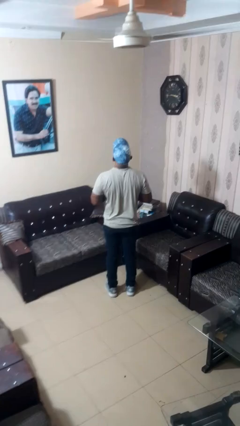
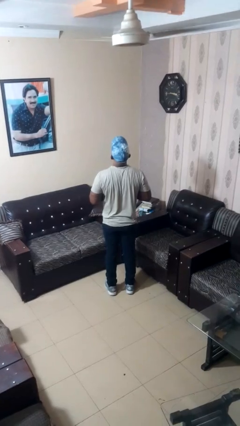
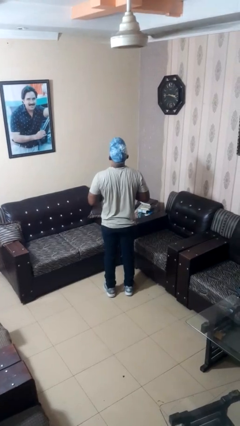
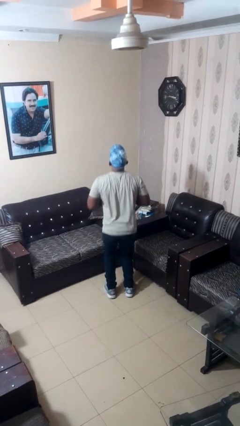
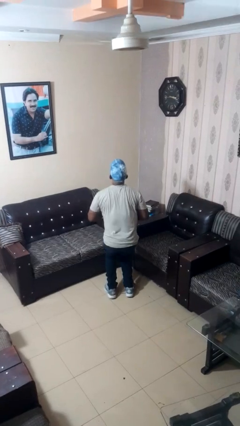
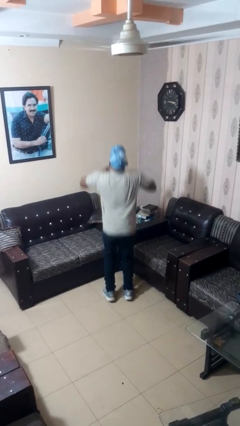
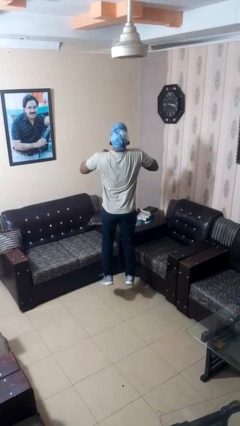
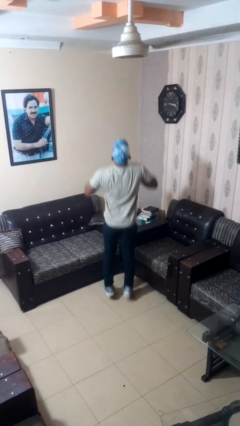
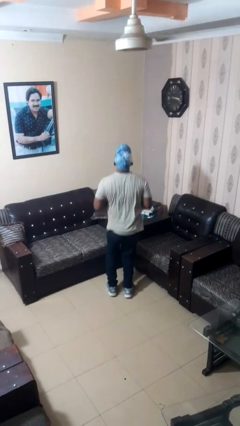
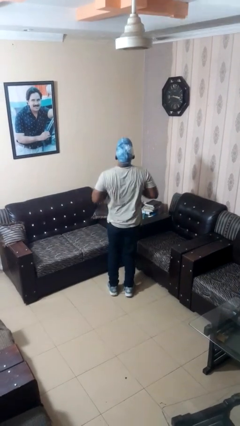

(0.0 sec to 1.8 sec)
person jumps

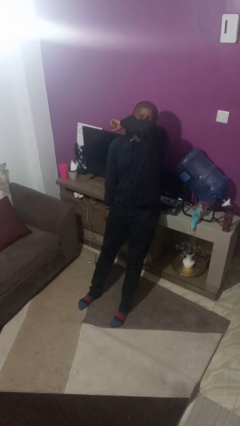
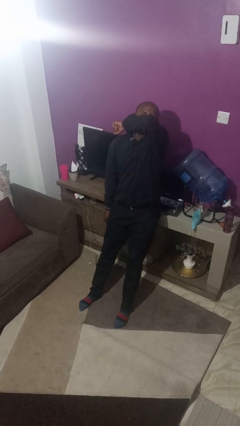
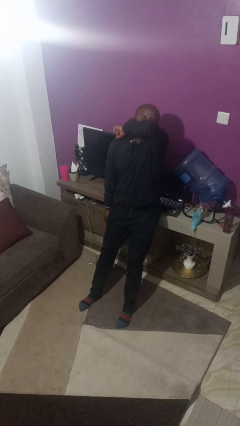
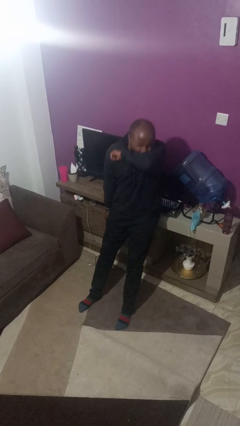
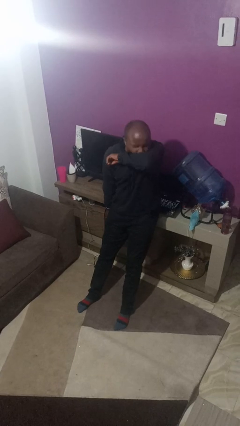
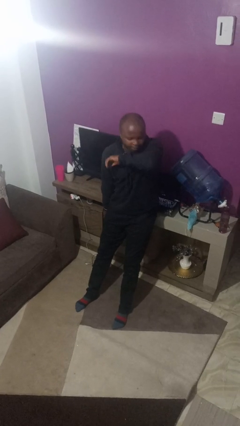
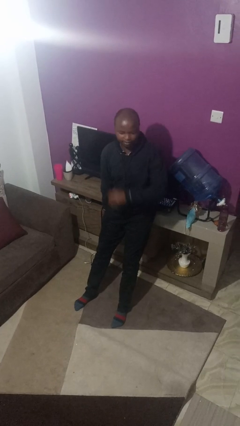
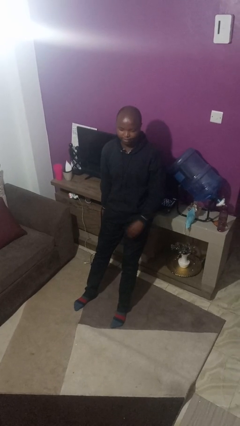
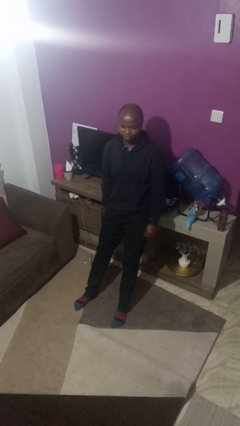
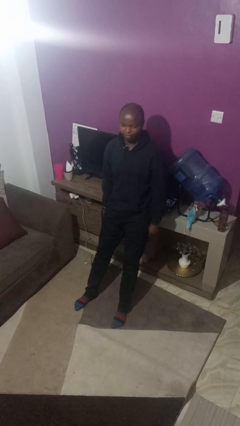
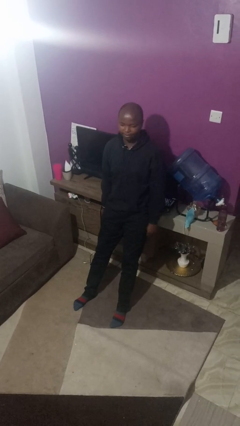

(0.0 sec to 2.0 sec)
person sneezes into hand

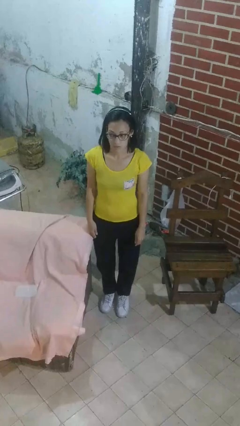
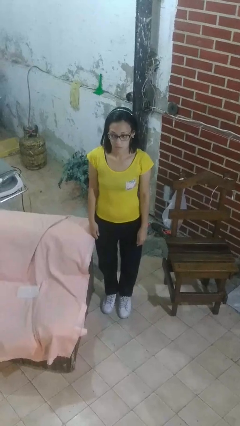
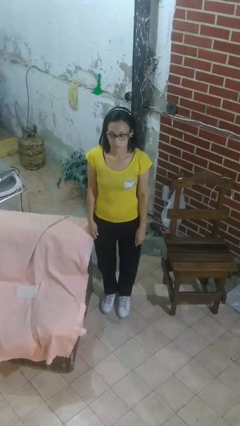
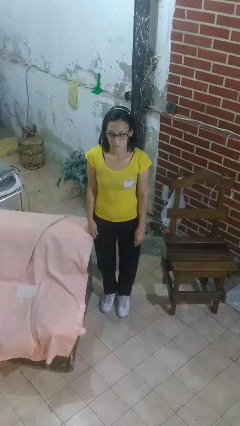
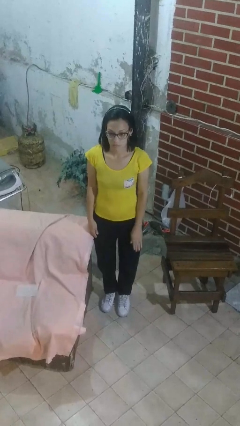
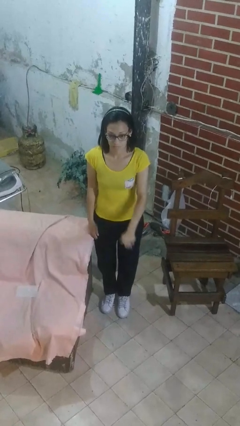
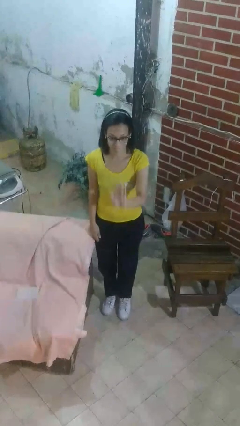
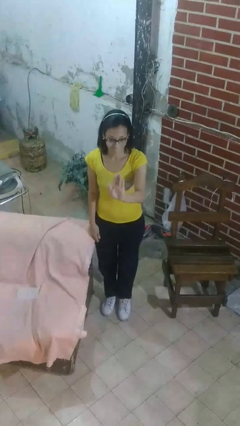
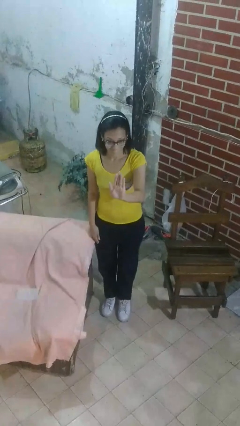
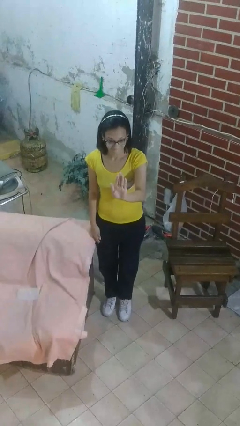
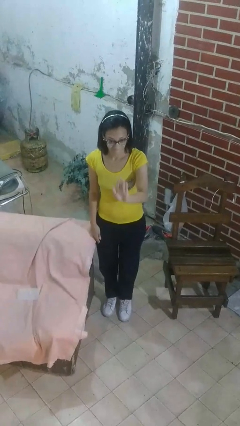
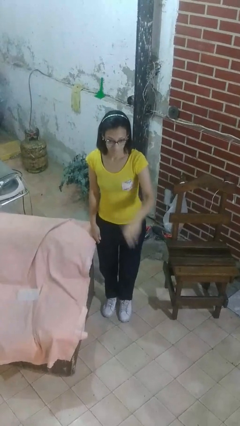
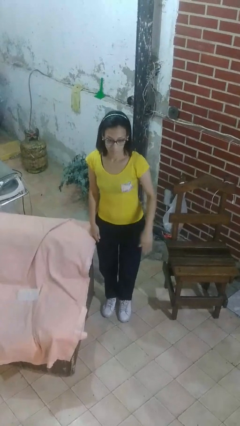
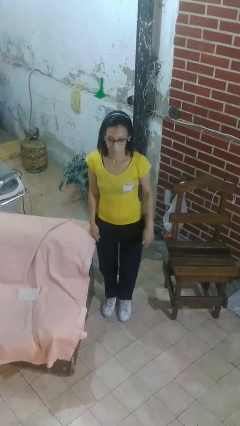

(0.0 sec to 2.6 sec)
person gestures stop

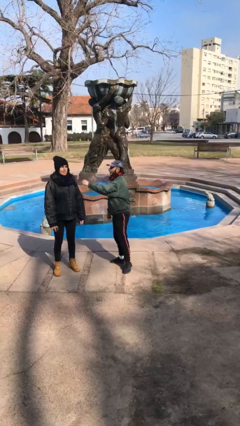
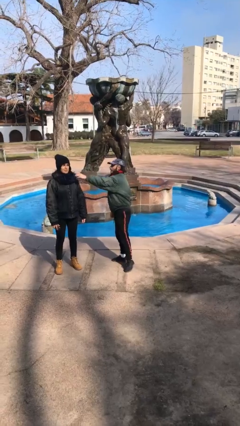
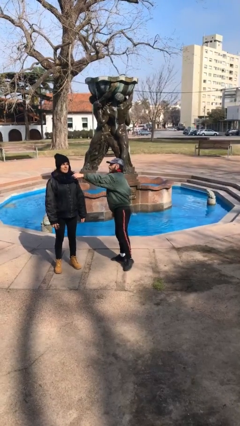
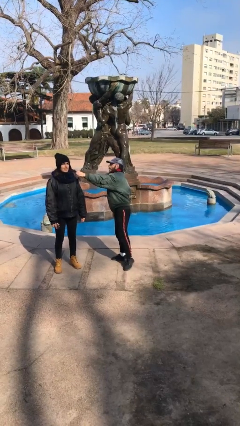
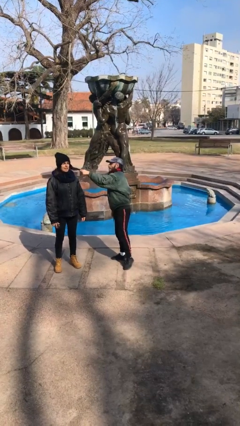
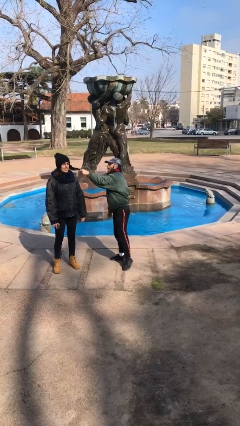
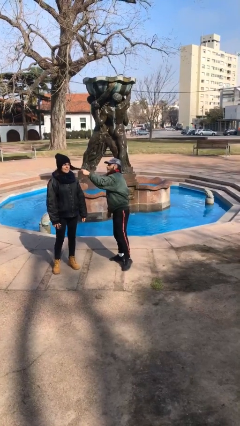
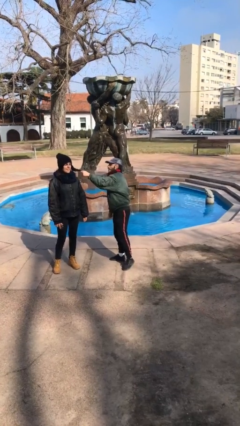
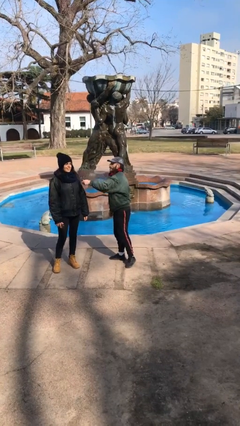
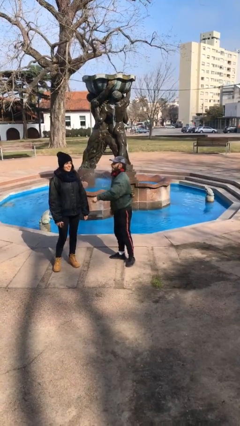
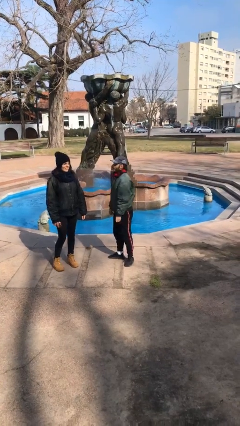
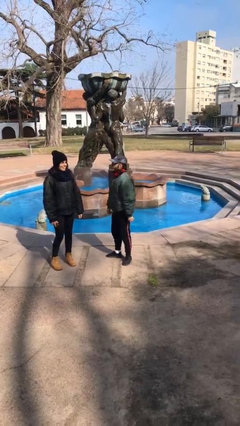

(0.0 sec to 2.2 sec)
person grabs person by hair

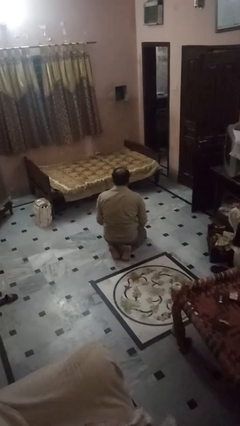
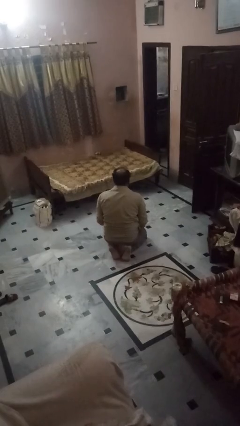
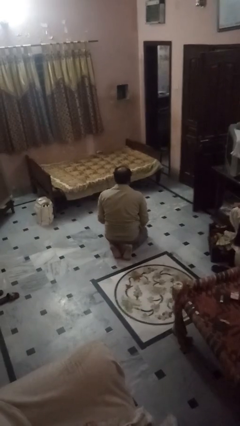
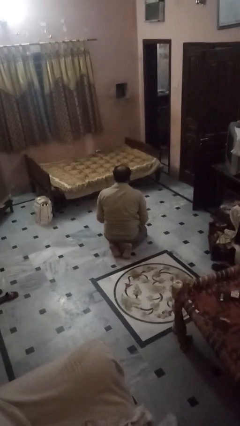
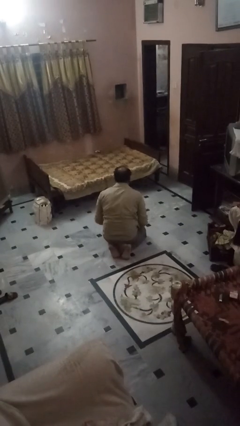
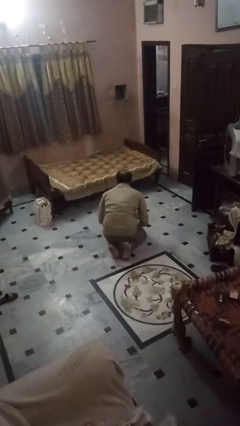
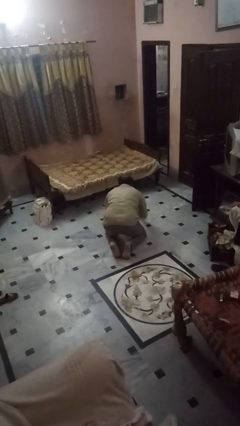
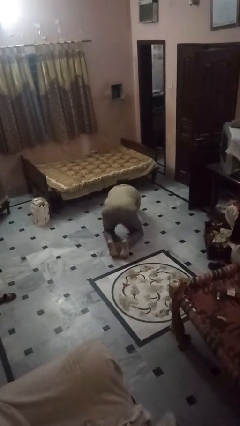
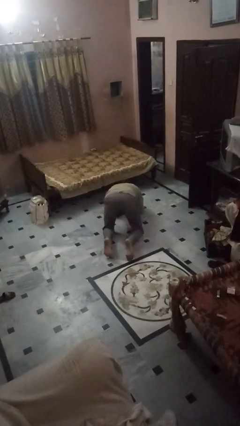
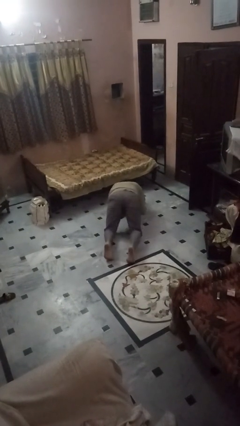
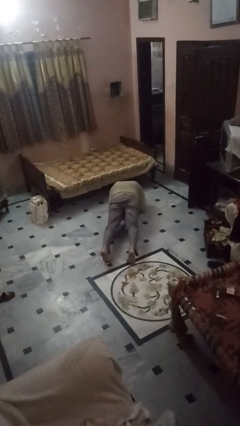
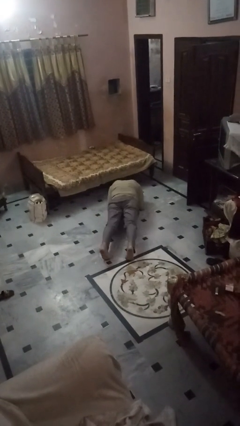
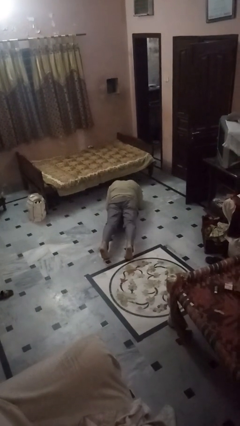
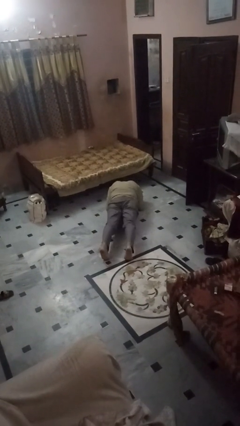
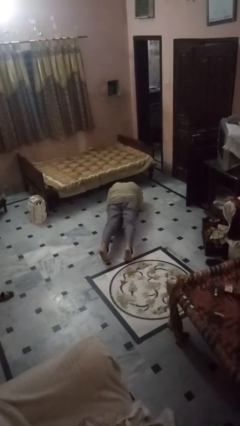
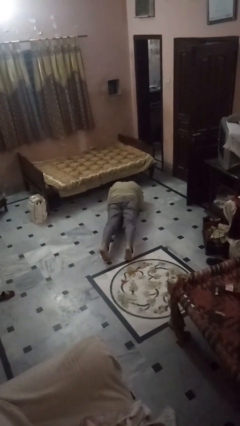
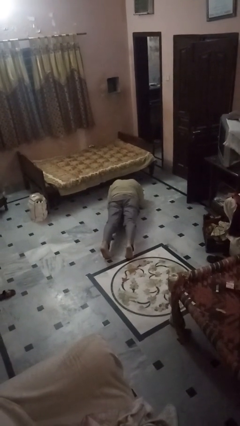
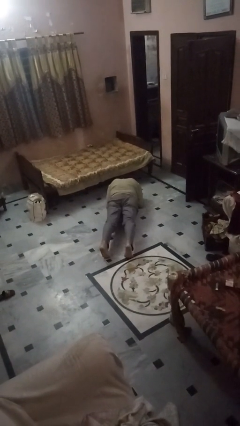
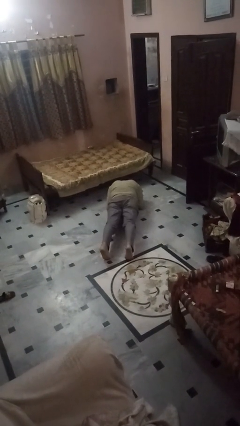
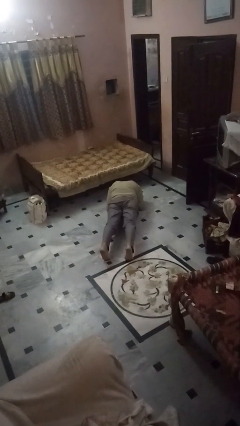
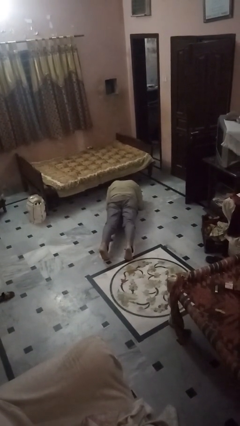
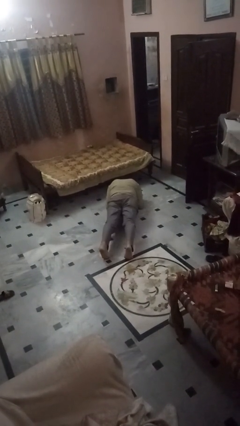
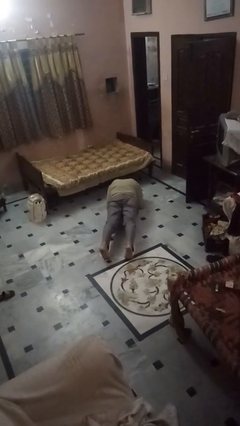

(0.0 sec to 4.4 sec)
person exercises with plank

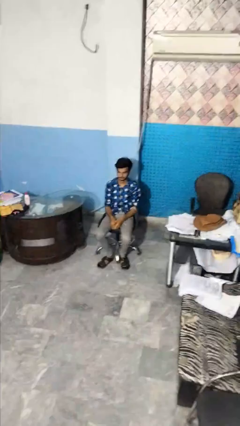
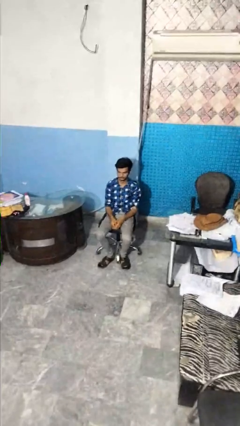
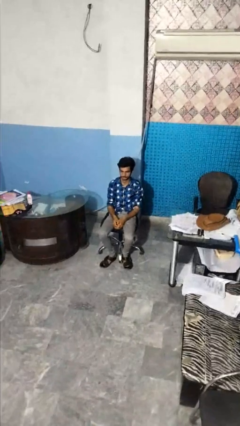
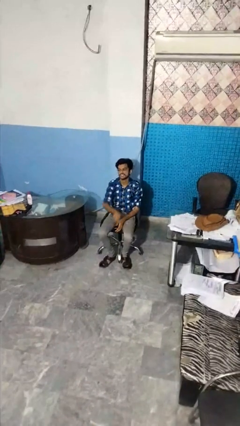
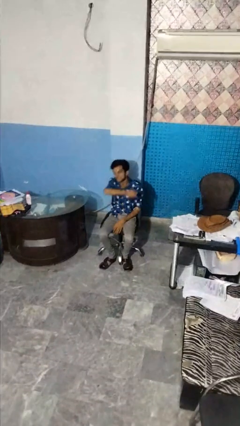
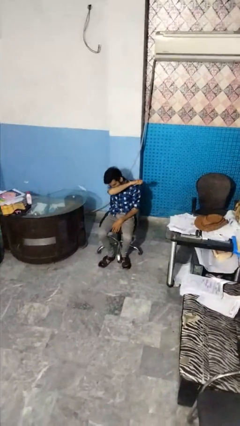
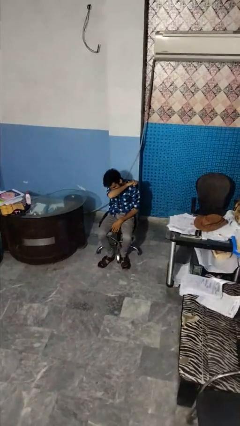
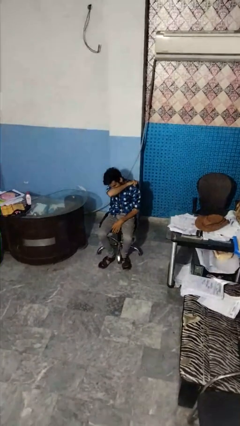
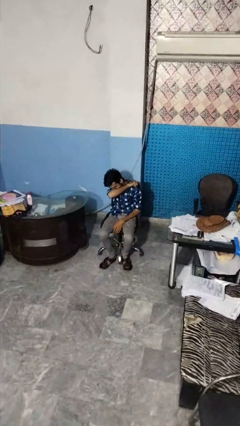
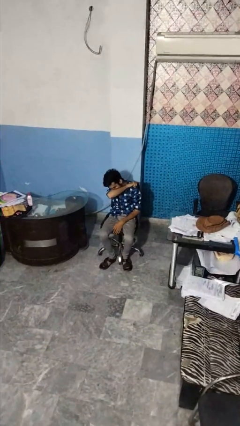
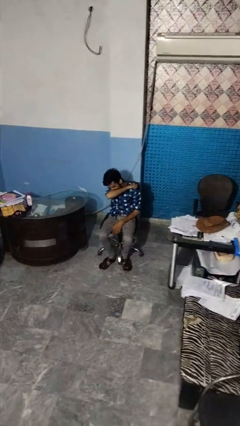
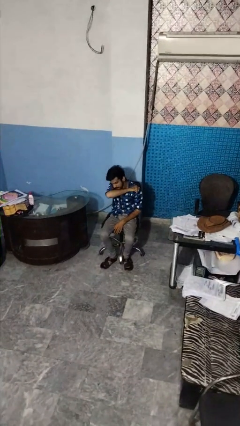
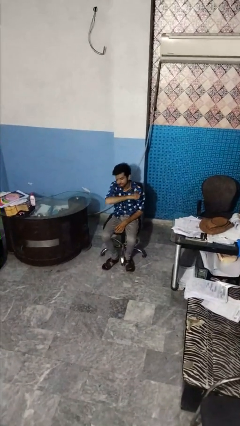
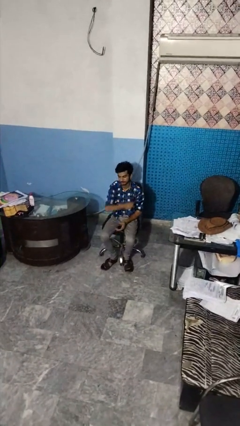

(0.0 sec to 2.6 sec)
person sneezes into arm

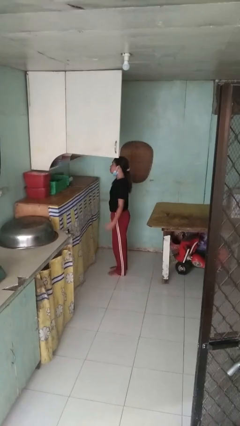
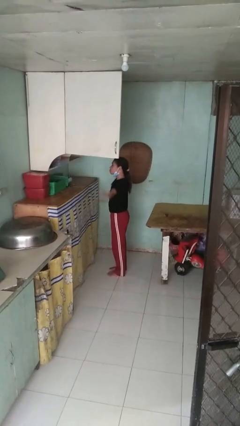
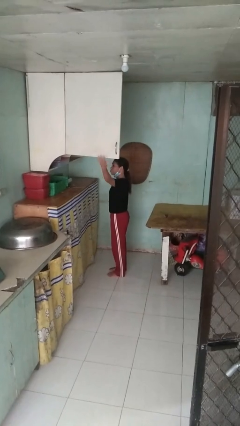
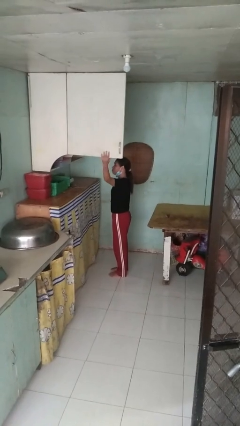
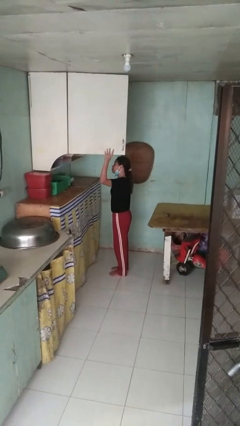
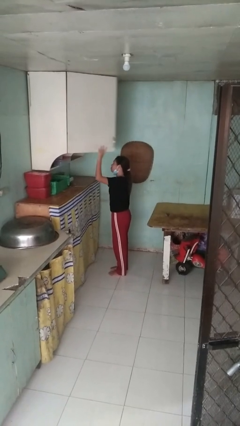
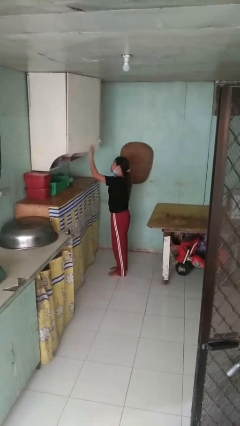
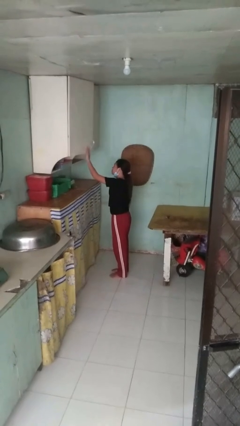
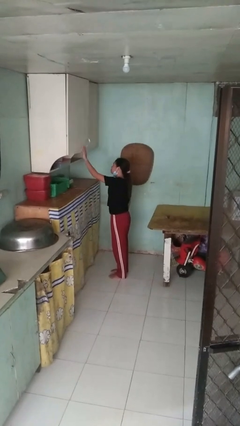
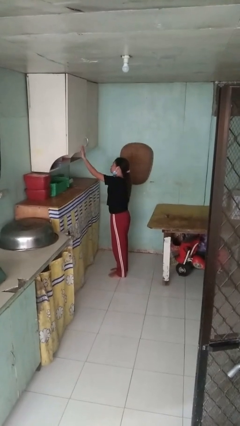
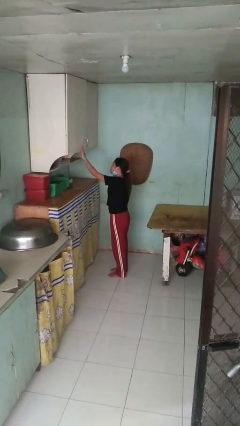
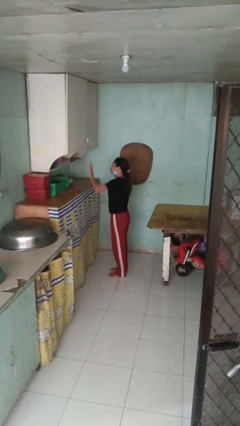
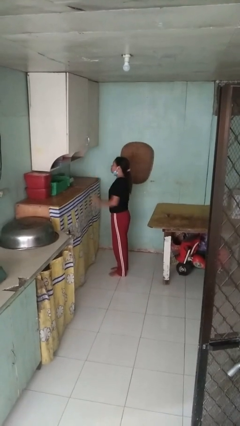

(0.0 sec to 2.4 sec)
person closes cabinet
